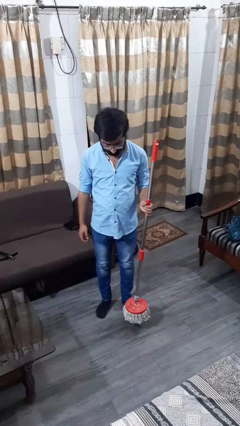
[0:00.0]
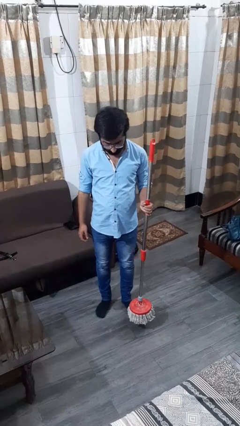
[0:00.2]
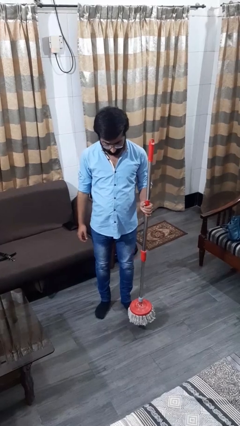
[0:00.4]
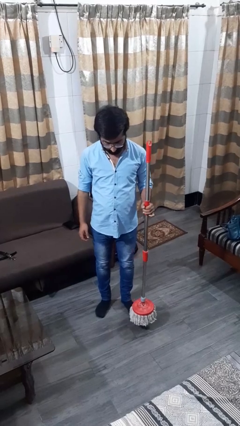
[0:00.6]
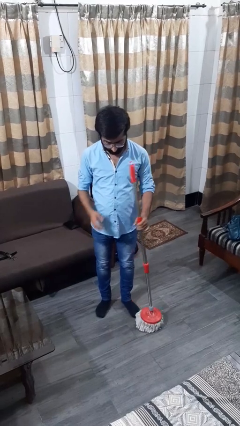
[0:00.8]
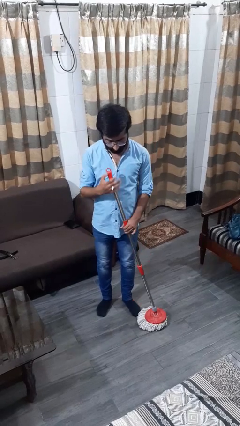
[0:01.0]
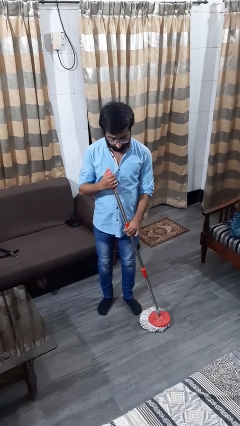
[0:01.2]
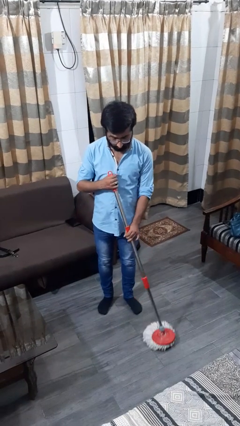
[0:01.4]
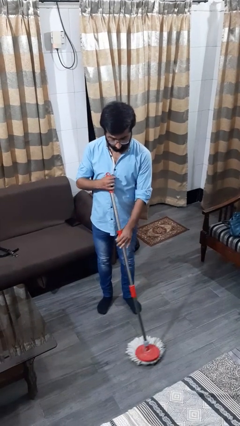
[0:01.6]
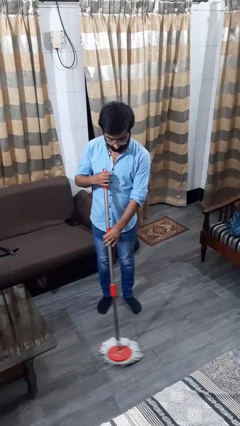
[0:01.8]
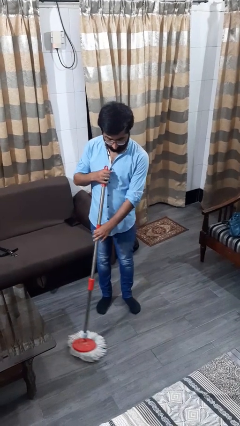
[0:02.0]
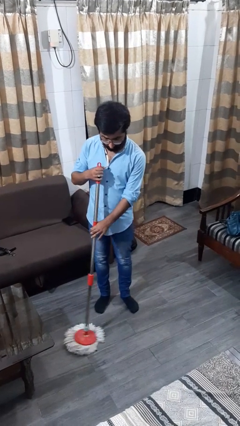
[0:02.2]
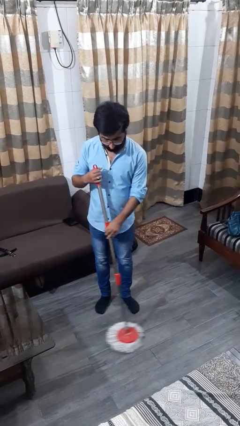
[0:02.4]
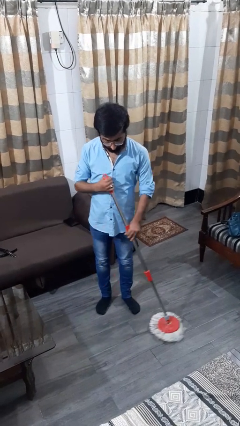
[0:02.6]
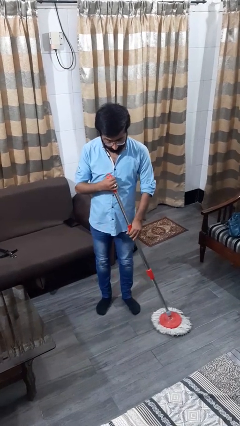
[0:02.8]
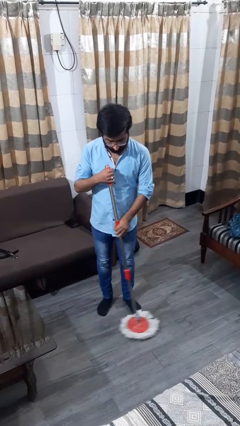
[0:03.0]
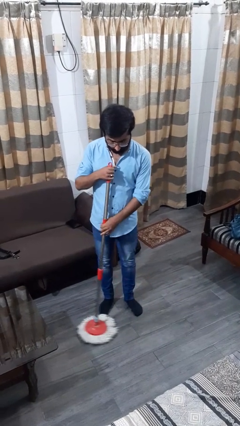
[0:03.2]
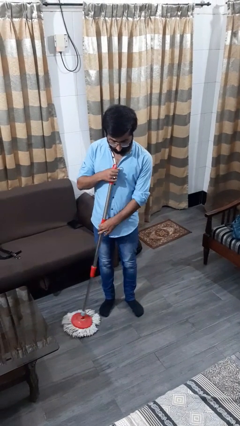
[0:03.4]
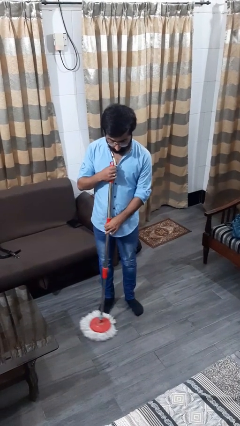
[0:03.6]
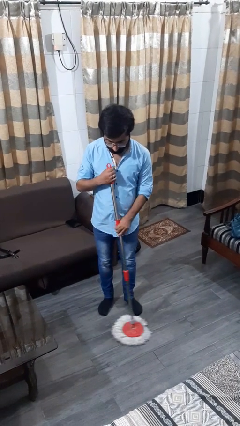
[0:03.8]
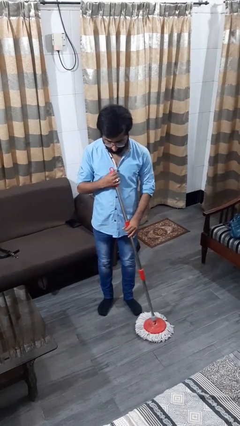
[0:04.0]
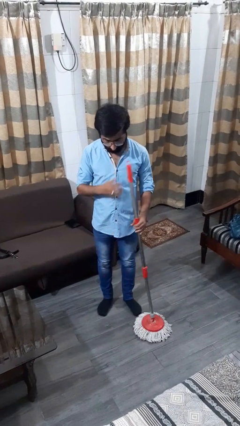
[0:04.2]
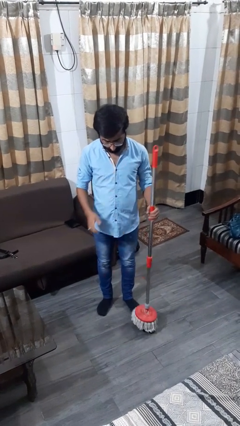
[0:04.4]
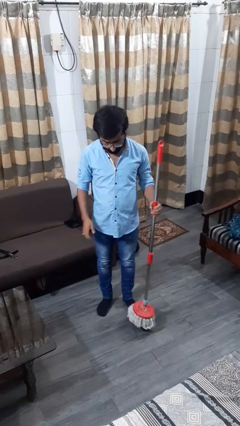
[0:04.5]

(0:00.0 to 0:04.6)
person sweeps floor

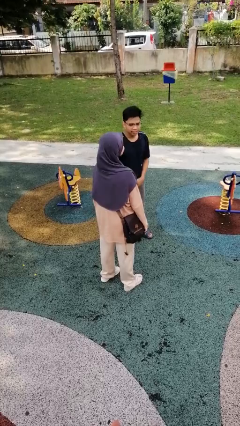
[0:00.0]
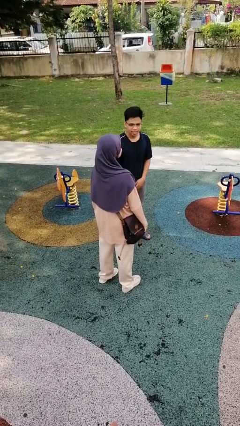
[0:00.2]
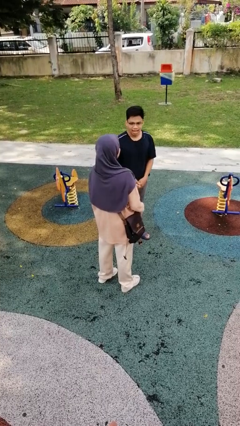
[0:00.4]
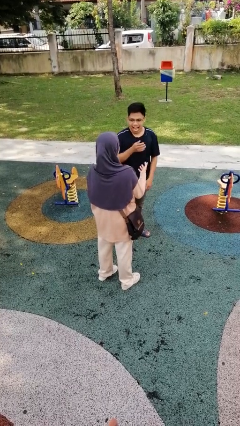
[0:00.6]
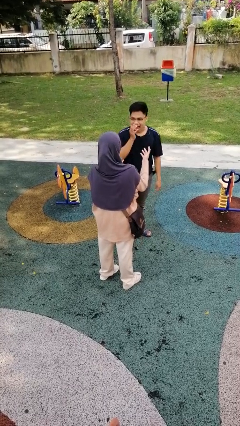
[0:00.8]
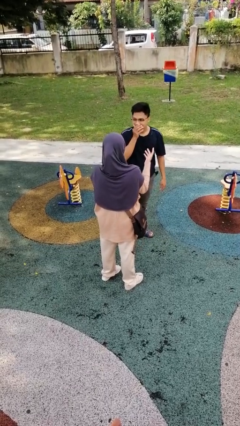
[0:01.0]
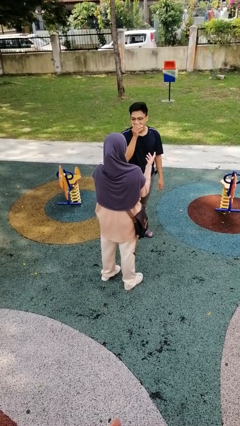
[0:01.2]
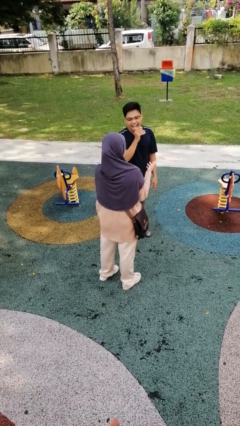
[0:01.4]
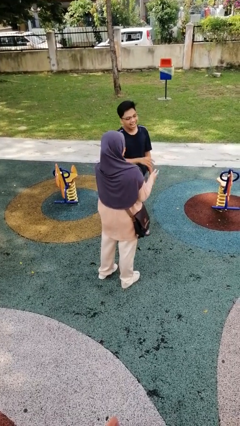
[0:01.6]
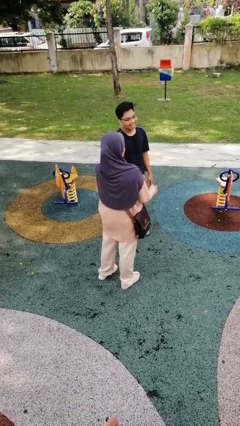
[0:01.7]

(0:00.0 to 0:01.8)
person laughs with person

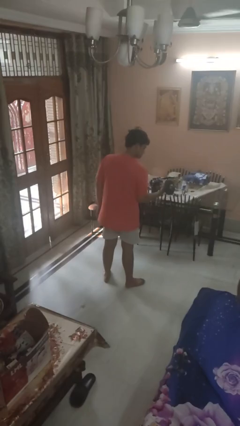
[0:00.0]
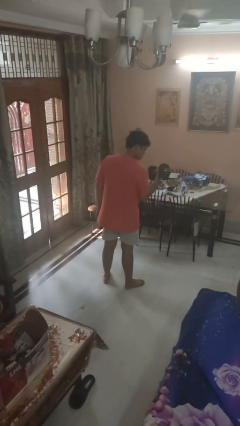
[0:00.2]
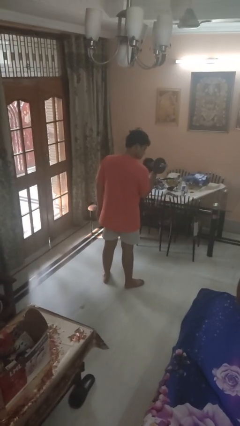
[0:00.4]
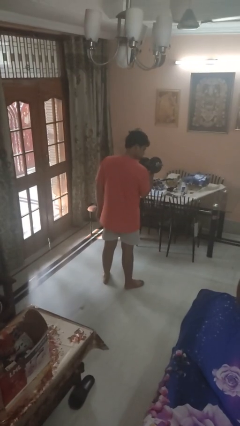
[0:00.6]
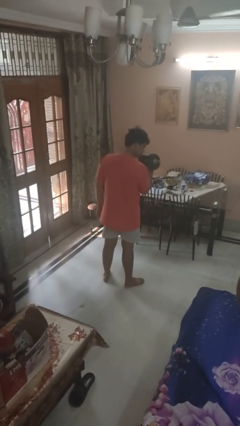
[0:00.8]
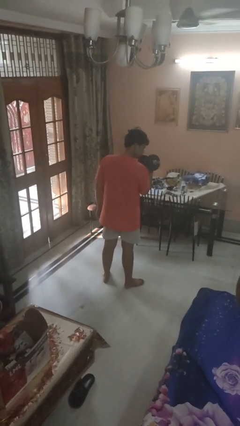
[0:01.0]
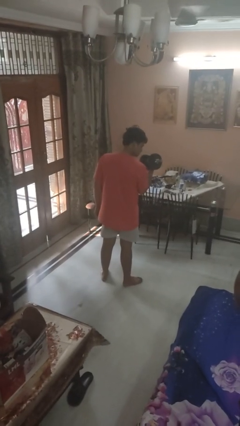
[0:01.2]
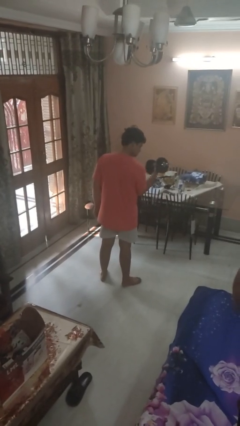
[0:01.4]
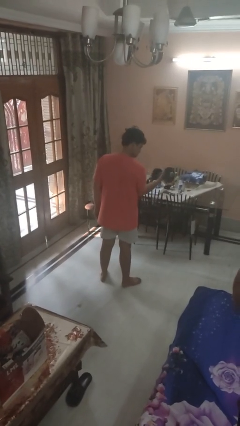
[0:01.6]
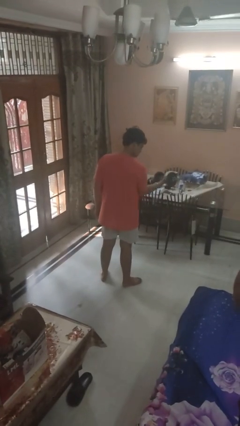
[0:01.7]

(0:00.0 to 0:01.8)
person lifts dumbbells

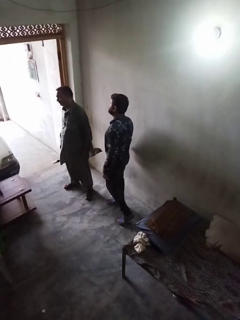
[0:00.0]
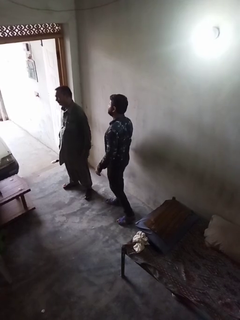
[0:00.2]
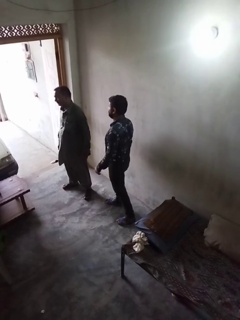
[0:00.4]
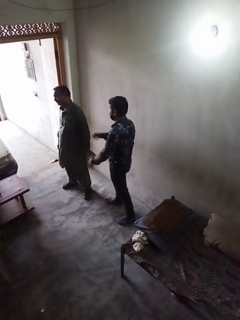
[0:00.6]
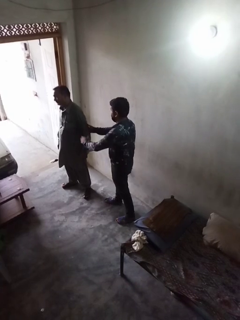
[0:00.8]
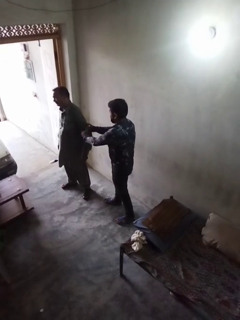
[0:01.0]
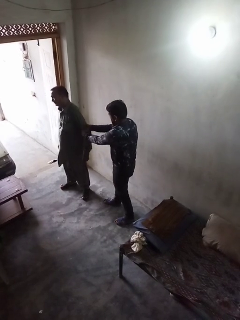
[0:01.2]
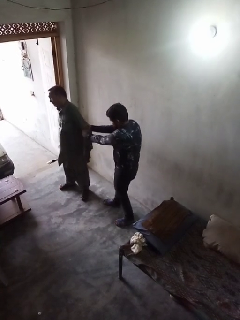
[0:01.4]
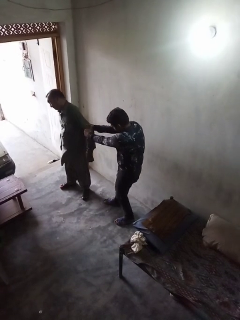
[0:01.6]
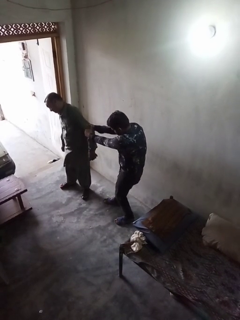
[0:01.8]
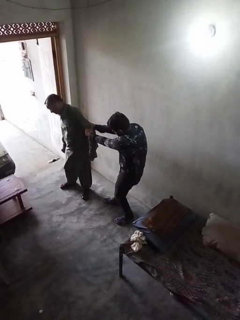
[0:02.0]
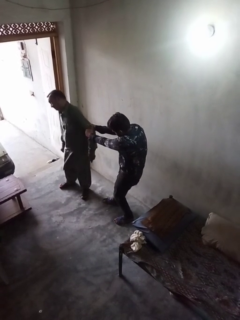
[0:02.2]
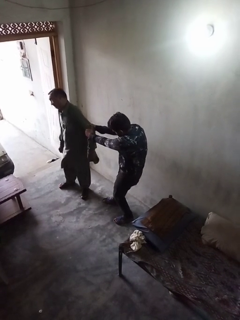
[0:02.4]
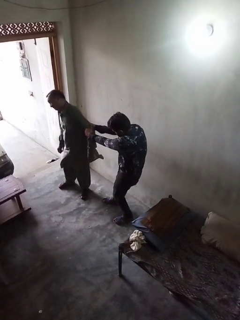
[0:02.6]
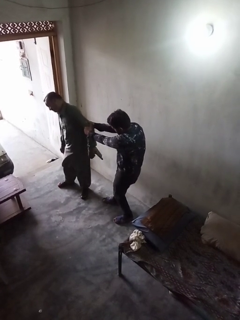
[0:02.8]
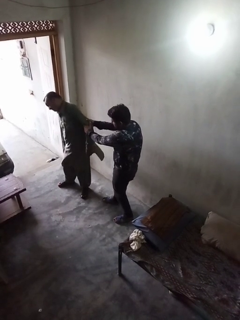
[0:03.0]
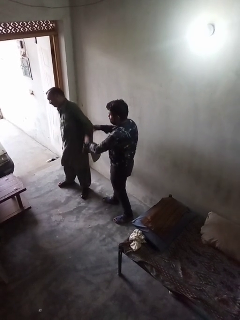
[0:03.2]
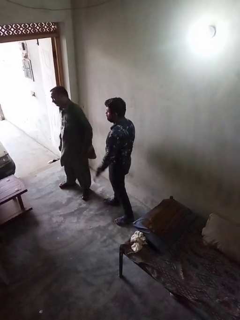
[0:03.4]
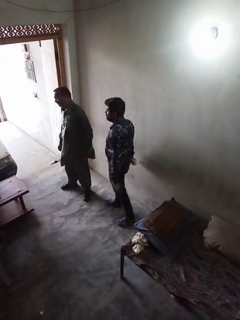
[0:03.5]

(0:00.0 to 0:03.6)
person grabs person by forearm

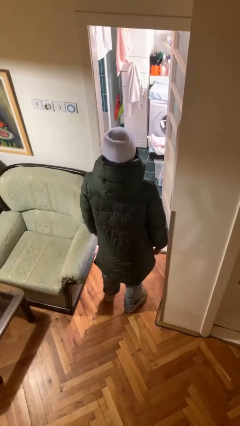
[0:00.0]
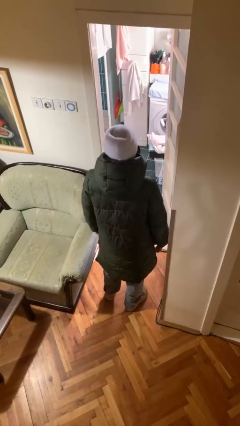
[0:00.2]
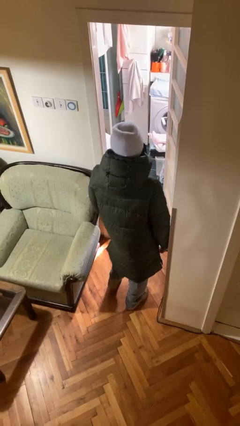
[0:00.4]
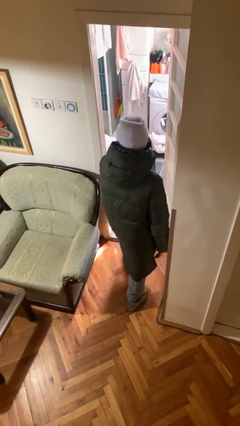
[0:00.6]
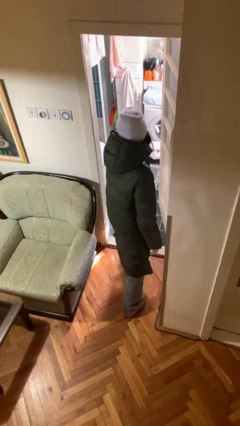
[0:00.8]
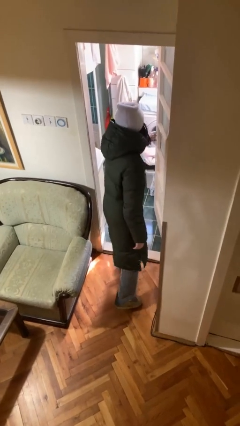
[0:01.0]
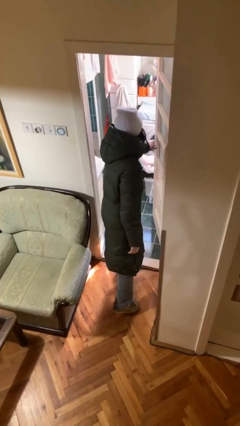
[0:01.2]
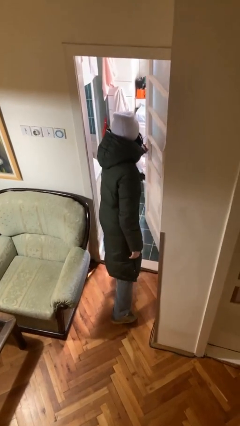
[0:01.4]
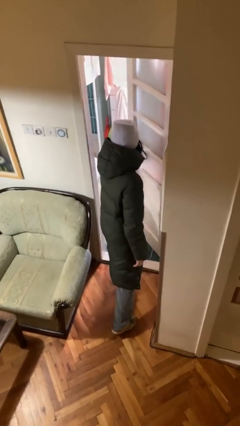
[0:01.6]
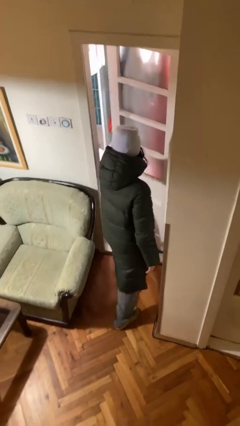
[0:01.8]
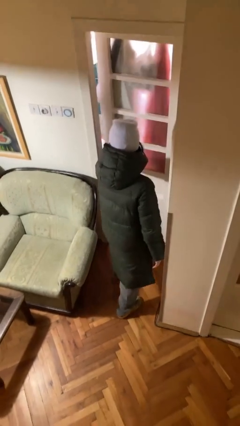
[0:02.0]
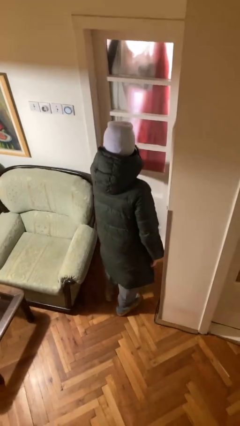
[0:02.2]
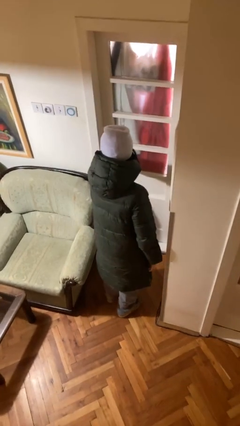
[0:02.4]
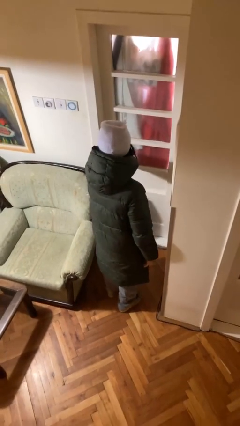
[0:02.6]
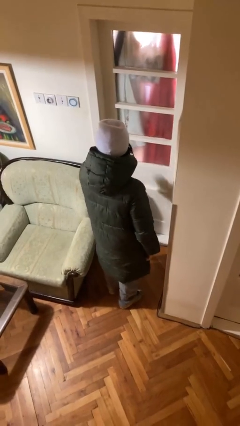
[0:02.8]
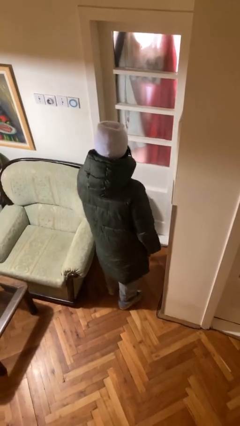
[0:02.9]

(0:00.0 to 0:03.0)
person closes facility door

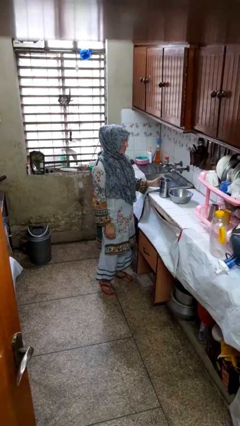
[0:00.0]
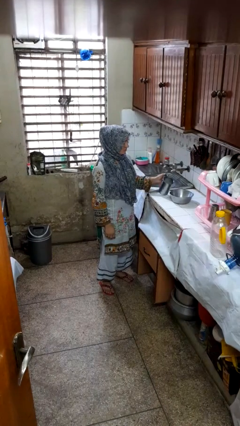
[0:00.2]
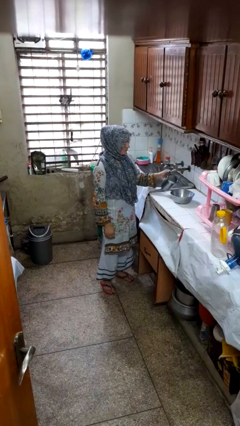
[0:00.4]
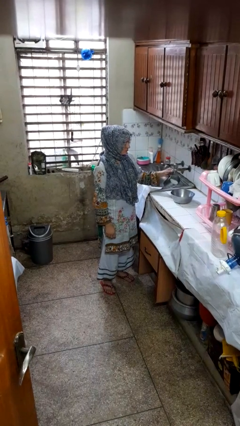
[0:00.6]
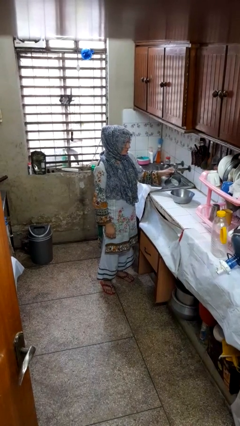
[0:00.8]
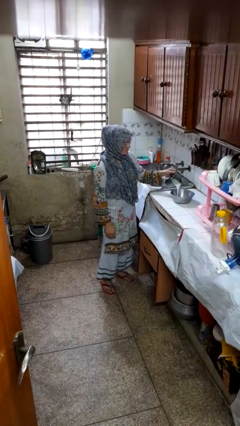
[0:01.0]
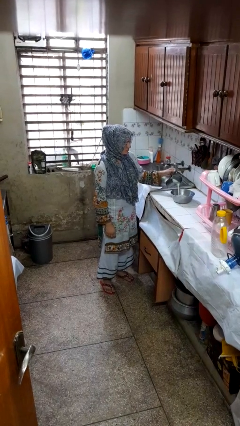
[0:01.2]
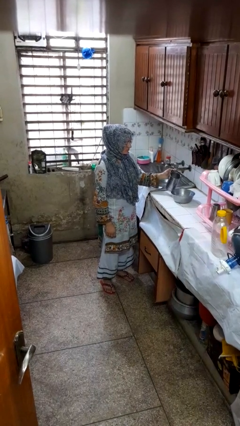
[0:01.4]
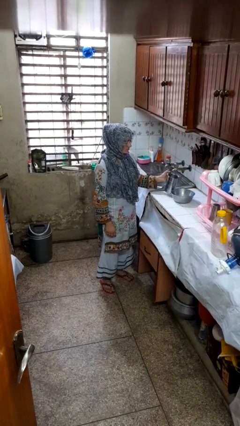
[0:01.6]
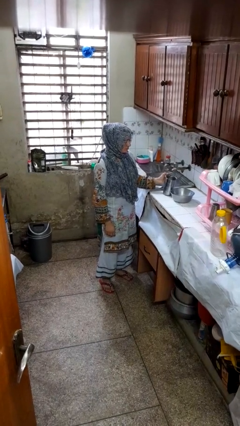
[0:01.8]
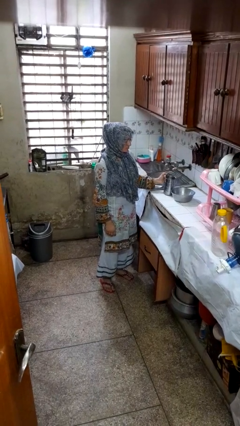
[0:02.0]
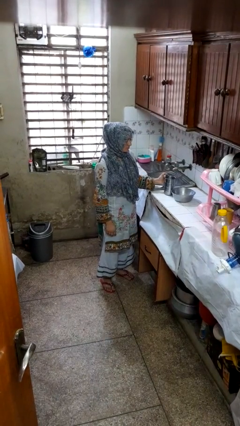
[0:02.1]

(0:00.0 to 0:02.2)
person pours into bowl

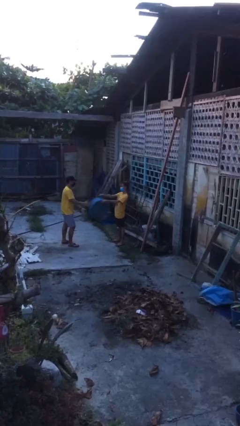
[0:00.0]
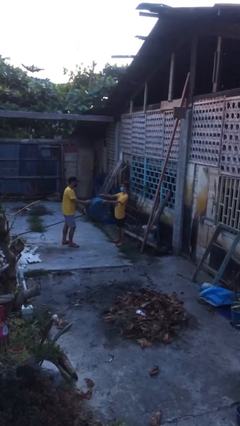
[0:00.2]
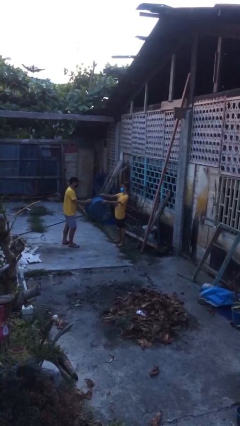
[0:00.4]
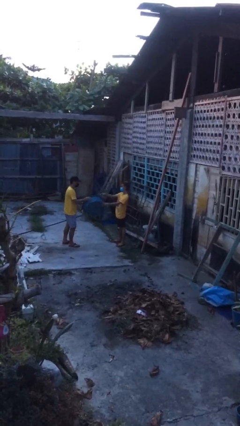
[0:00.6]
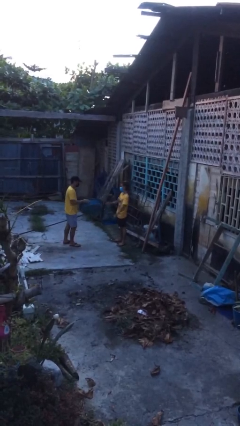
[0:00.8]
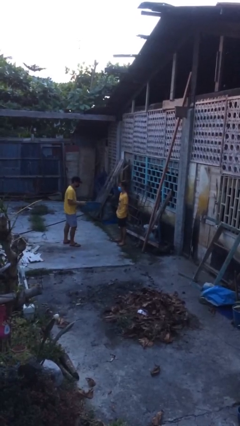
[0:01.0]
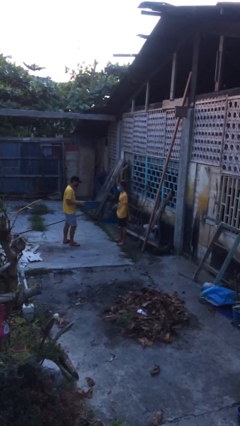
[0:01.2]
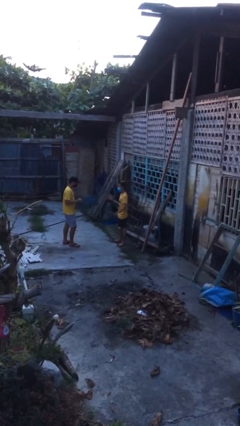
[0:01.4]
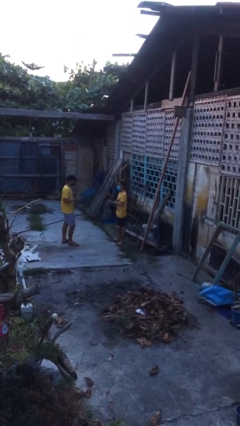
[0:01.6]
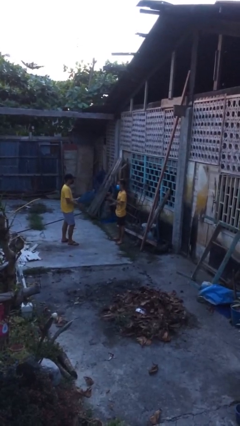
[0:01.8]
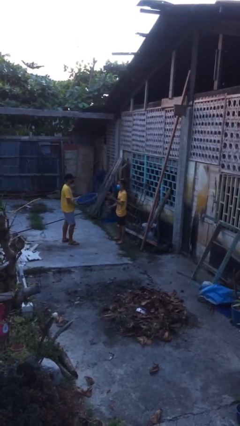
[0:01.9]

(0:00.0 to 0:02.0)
person transfers object to person
